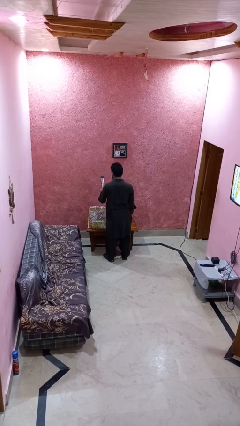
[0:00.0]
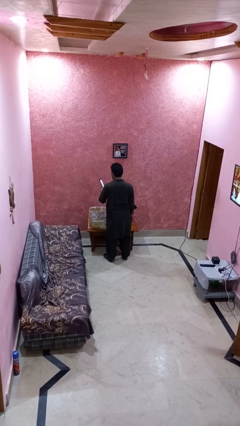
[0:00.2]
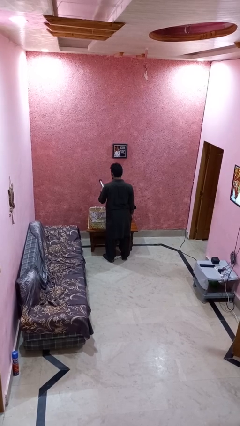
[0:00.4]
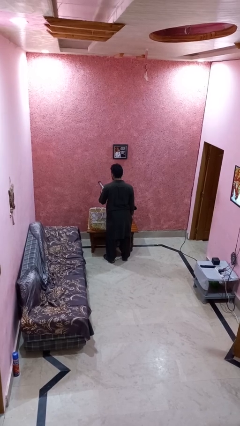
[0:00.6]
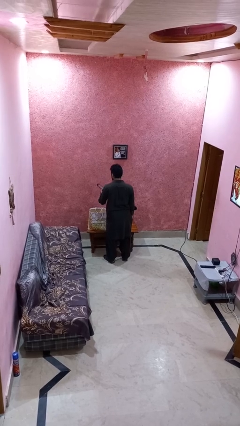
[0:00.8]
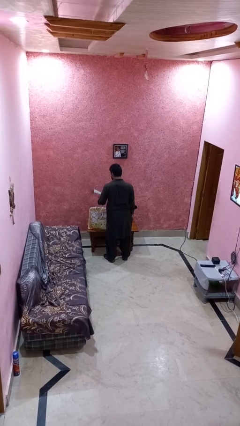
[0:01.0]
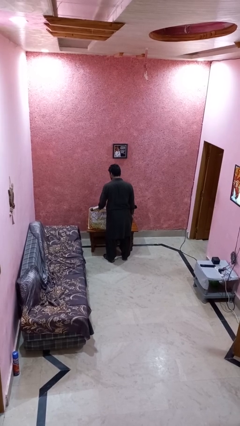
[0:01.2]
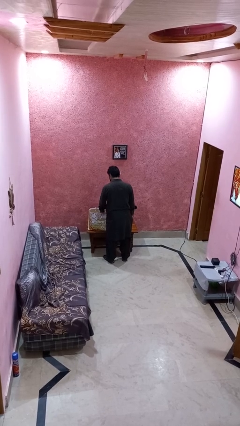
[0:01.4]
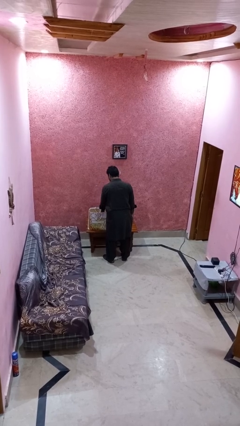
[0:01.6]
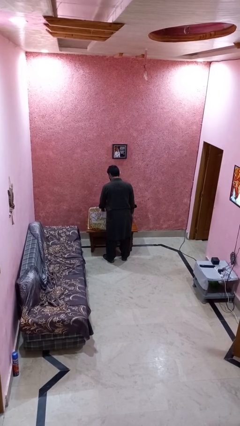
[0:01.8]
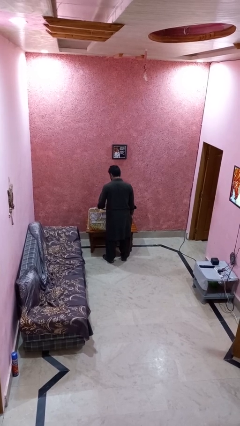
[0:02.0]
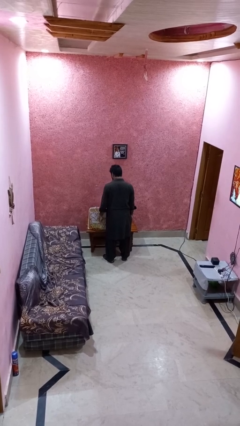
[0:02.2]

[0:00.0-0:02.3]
person puts object into bag

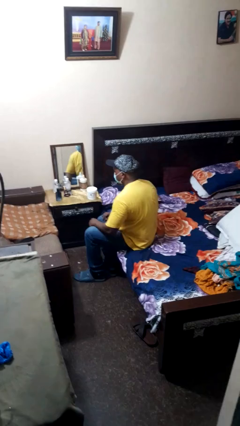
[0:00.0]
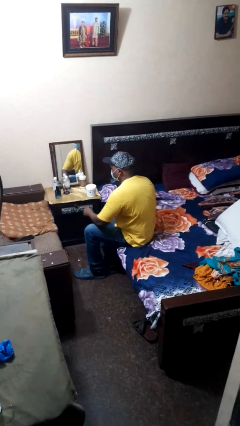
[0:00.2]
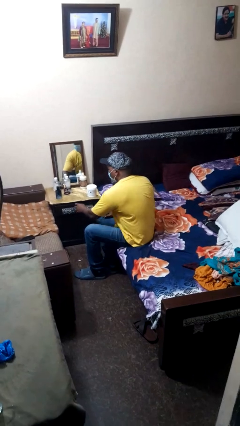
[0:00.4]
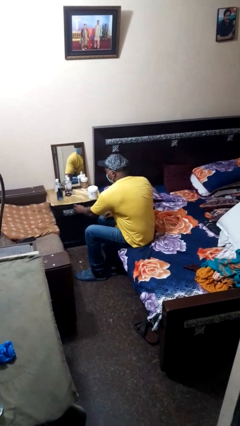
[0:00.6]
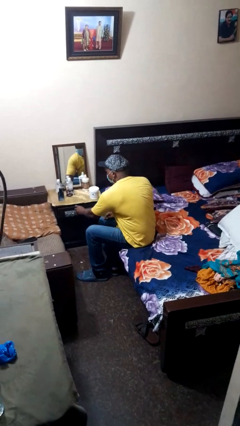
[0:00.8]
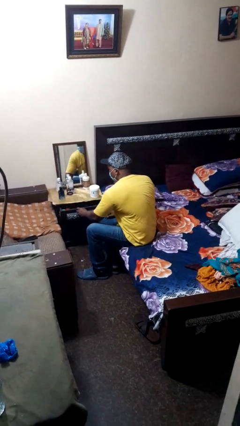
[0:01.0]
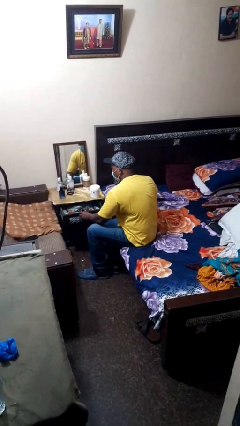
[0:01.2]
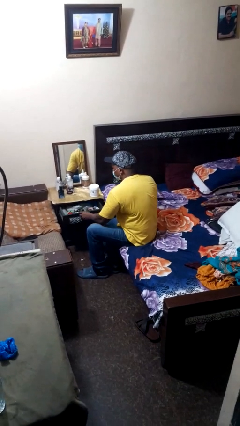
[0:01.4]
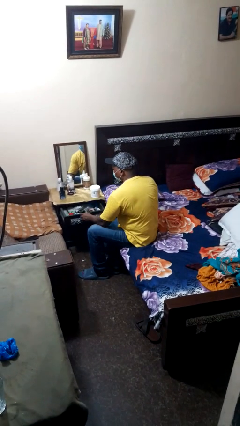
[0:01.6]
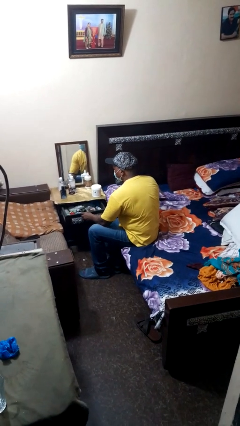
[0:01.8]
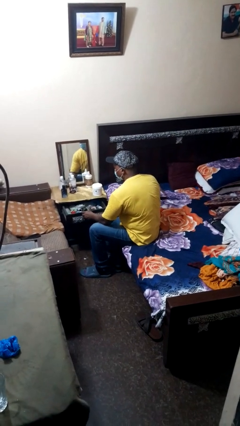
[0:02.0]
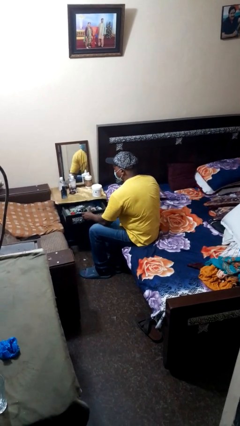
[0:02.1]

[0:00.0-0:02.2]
person opens dresser drawer

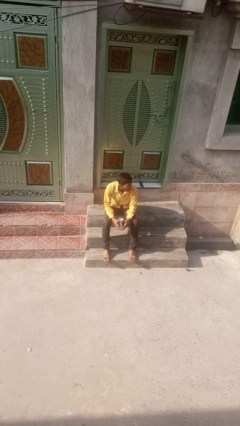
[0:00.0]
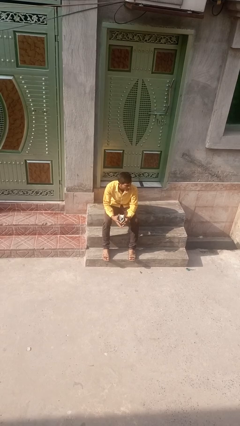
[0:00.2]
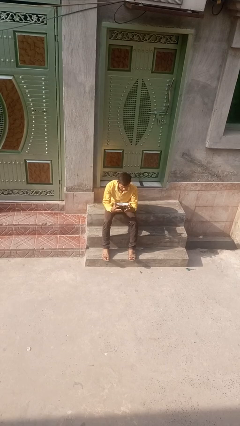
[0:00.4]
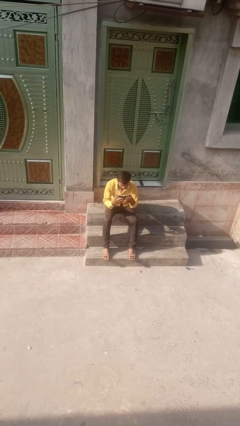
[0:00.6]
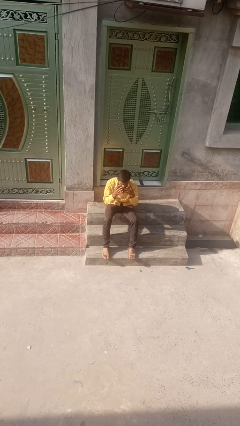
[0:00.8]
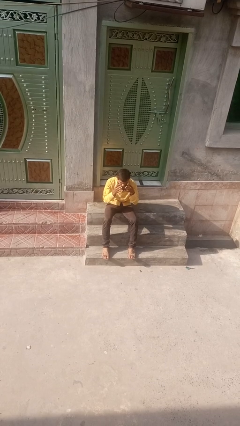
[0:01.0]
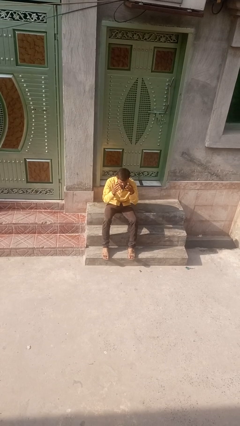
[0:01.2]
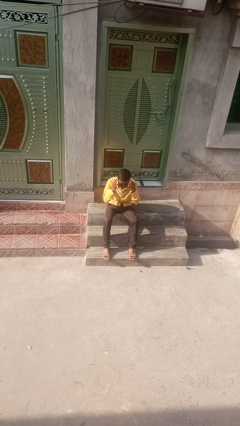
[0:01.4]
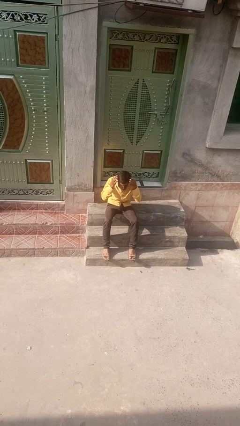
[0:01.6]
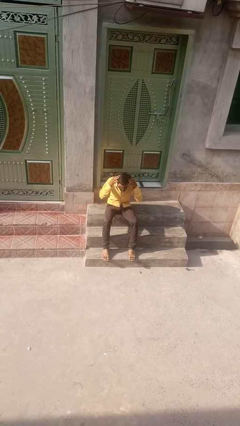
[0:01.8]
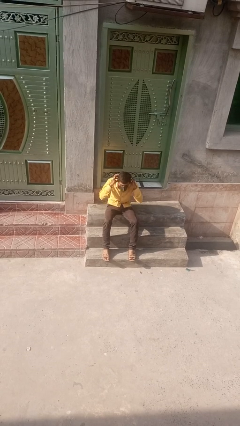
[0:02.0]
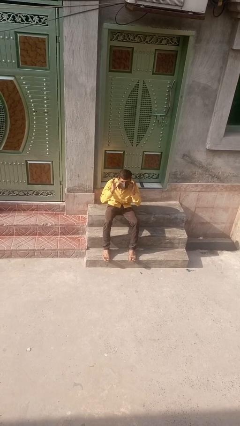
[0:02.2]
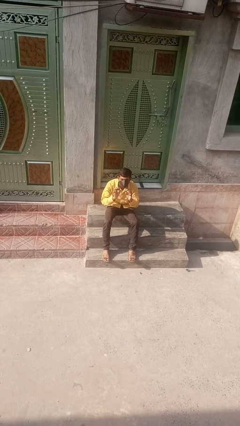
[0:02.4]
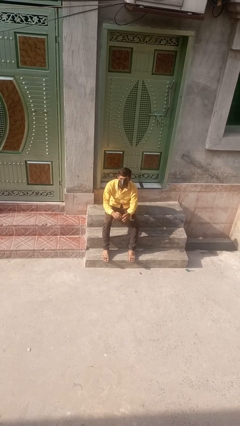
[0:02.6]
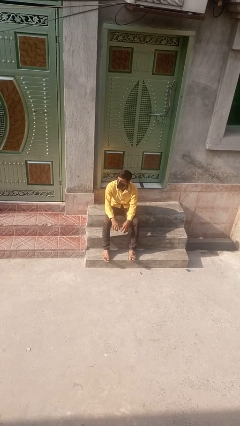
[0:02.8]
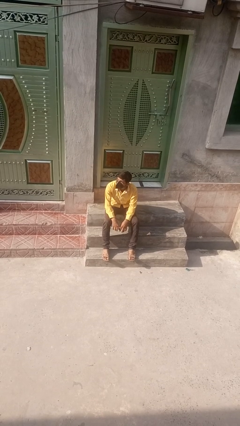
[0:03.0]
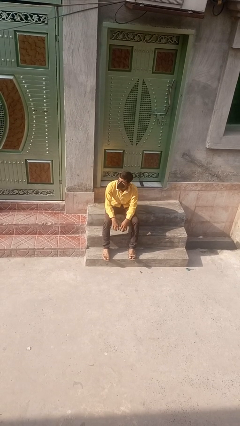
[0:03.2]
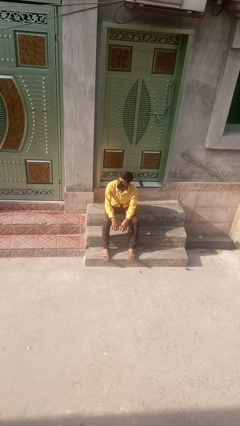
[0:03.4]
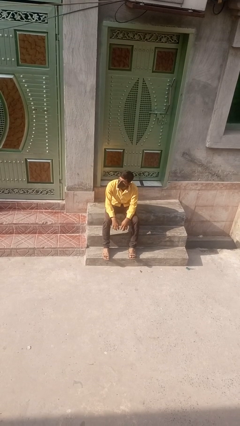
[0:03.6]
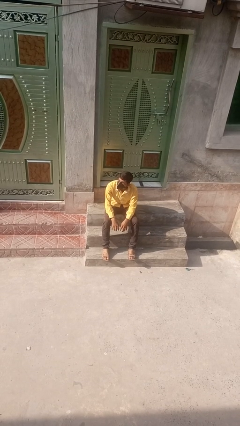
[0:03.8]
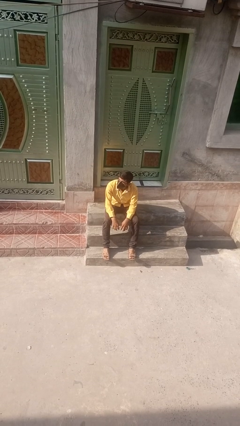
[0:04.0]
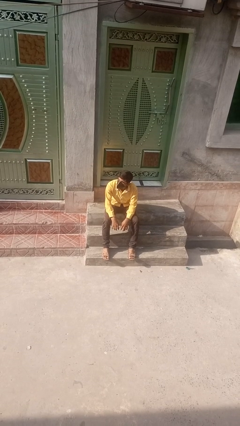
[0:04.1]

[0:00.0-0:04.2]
person puts on facemask

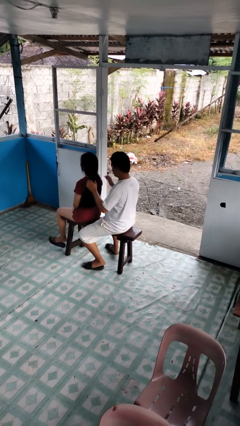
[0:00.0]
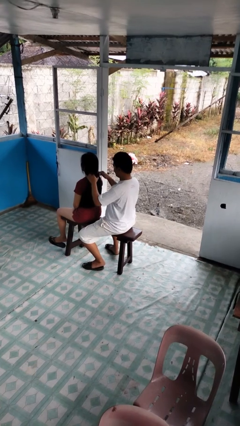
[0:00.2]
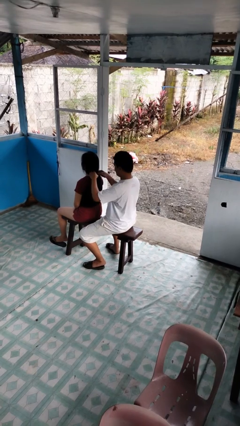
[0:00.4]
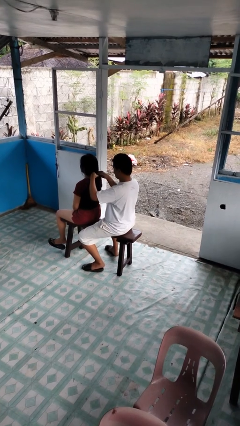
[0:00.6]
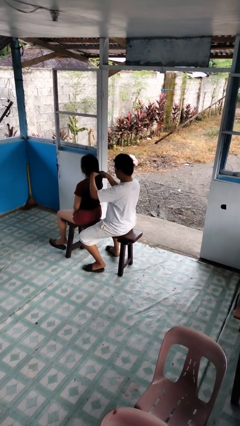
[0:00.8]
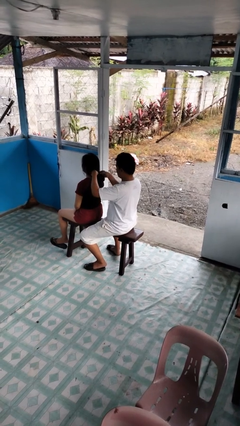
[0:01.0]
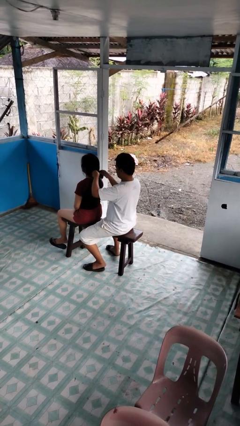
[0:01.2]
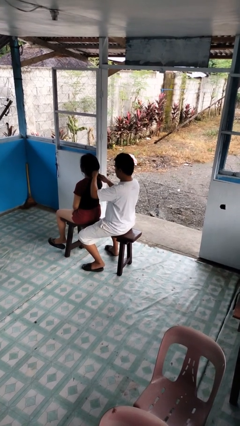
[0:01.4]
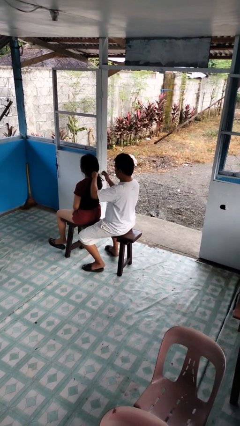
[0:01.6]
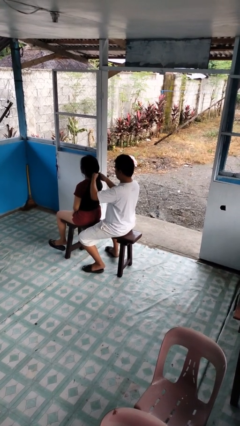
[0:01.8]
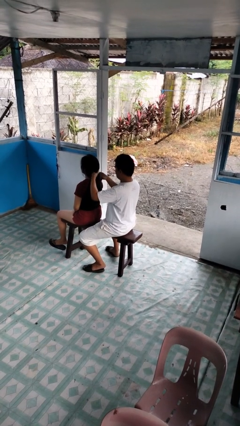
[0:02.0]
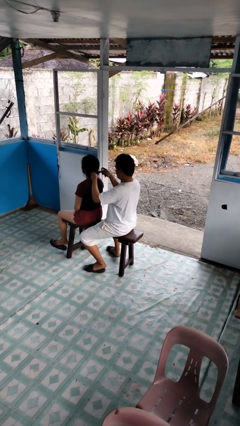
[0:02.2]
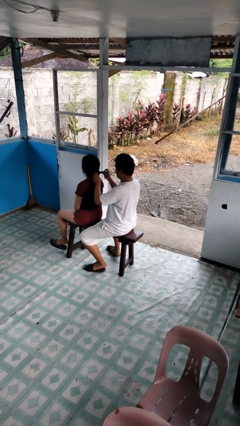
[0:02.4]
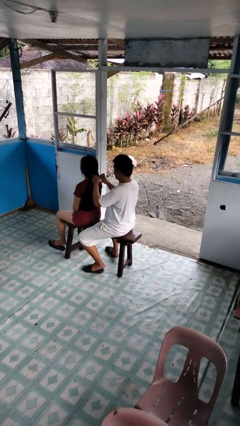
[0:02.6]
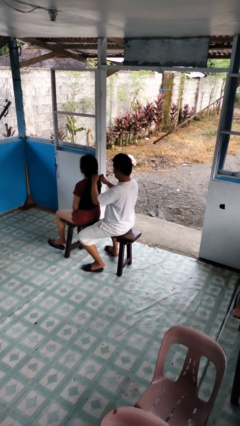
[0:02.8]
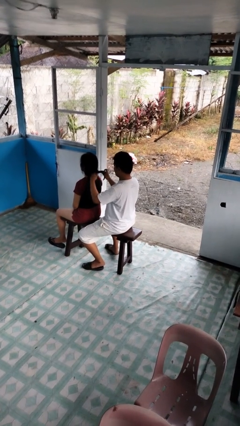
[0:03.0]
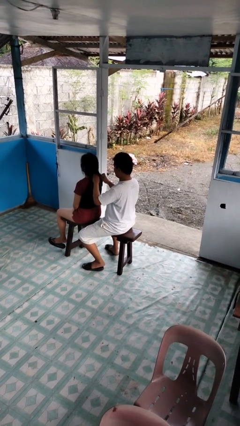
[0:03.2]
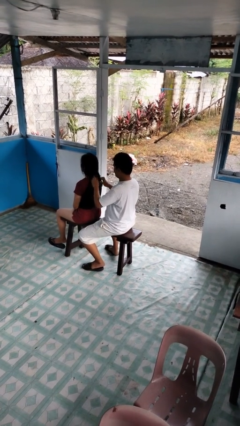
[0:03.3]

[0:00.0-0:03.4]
person braids hair of person

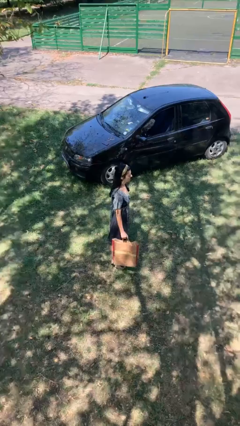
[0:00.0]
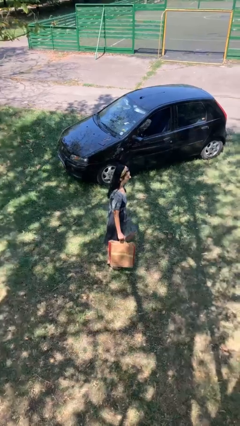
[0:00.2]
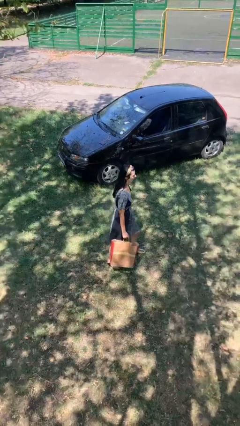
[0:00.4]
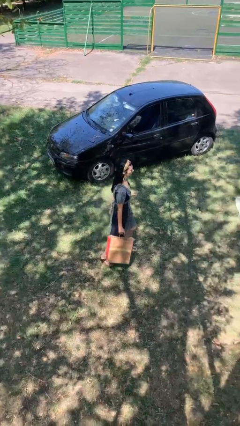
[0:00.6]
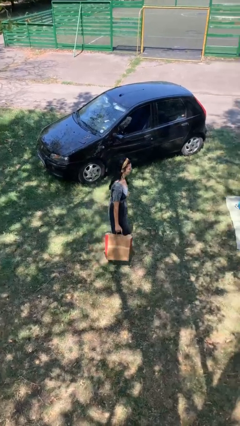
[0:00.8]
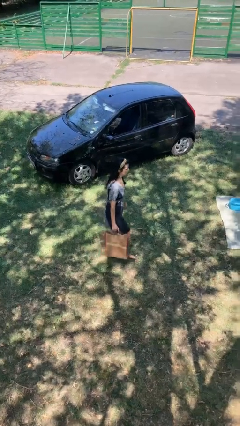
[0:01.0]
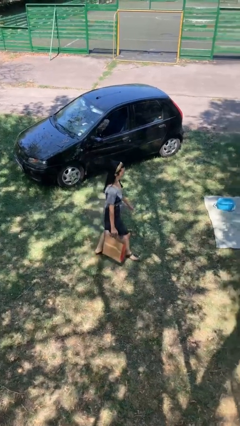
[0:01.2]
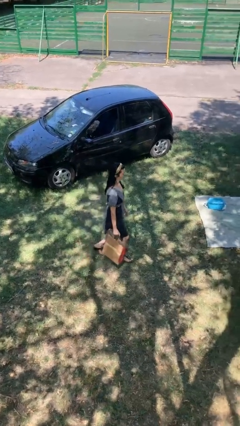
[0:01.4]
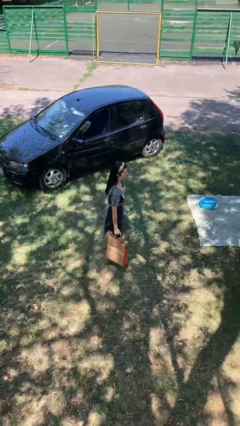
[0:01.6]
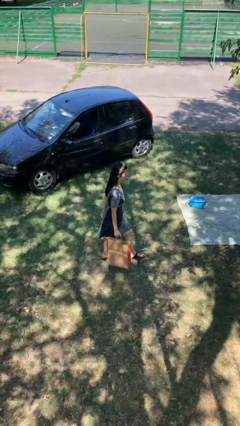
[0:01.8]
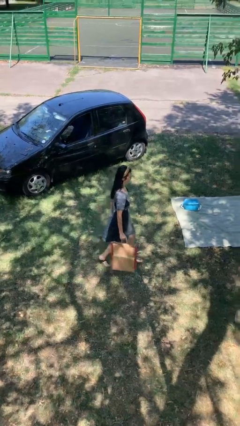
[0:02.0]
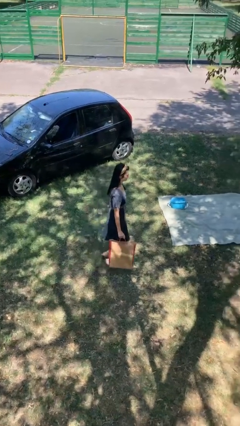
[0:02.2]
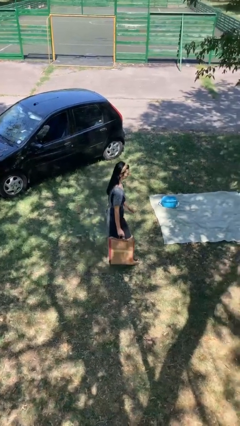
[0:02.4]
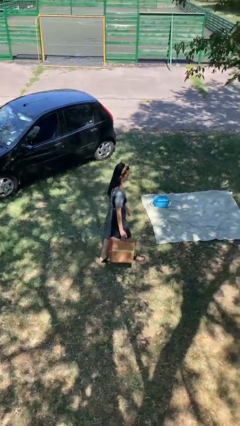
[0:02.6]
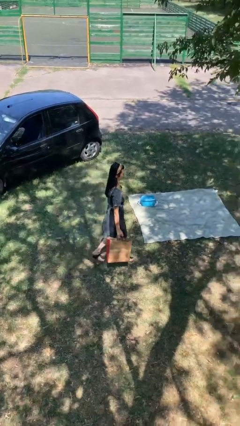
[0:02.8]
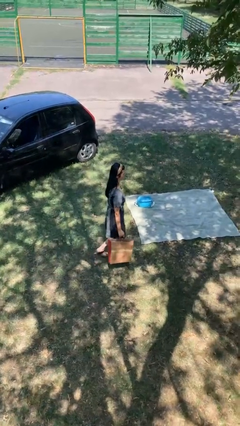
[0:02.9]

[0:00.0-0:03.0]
person carries groceries

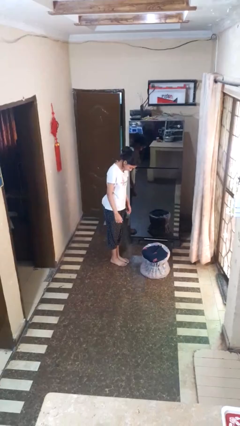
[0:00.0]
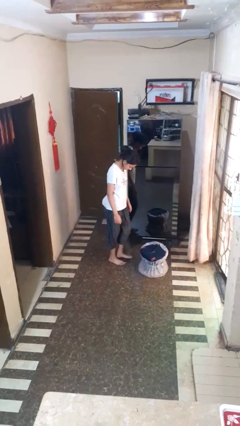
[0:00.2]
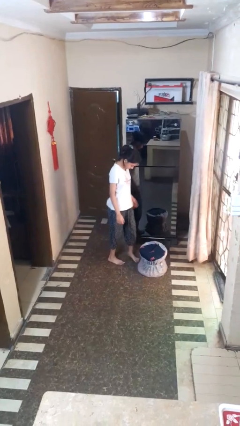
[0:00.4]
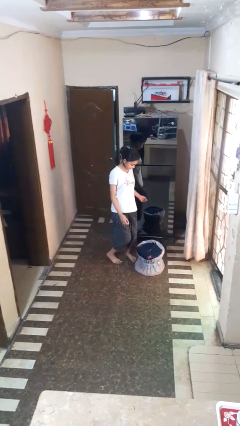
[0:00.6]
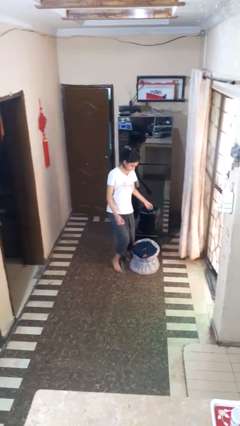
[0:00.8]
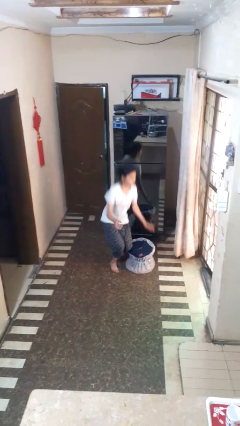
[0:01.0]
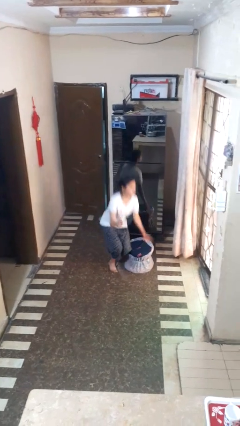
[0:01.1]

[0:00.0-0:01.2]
person trips on object on floor

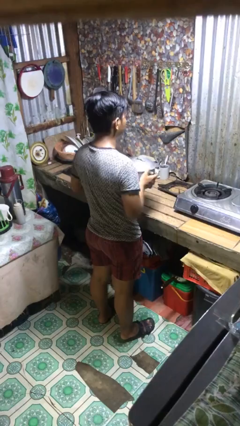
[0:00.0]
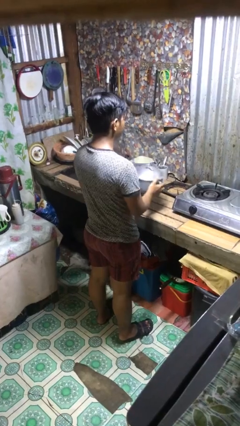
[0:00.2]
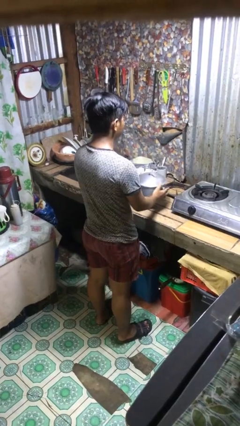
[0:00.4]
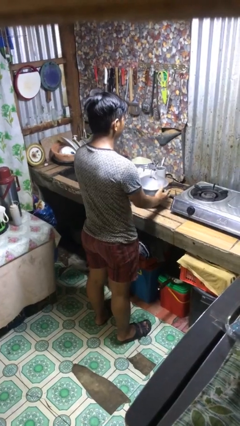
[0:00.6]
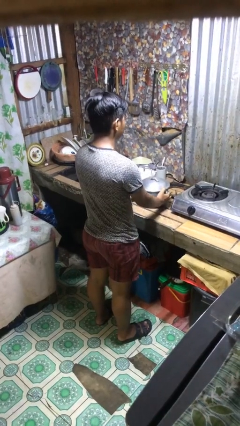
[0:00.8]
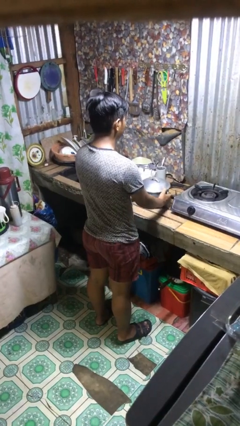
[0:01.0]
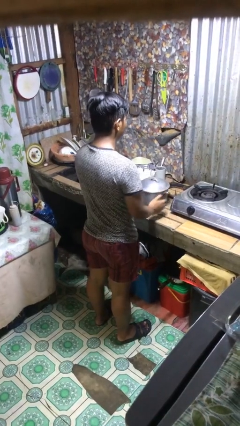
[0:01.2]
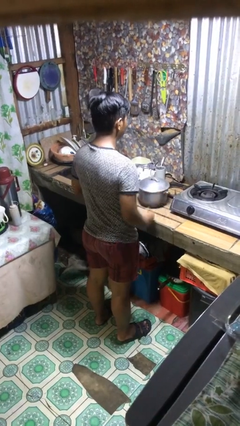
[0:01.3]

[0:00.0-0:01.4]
person puts down object on countertop
